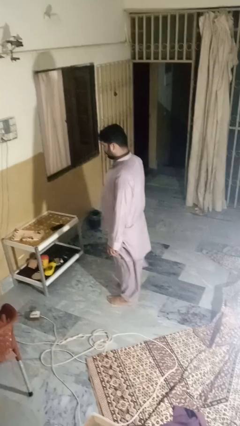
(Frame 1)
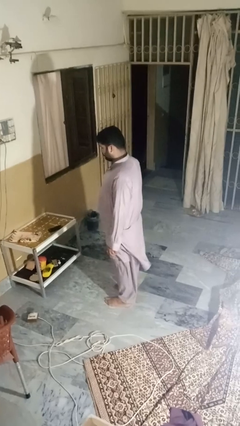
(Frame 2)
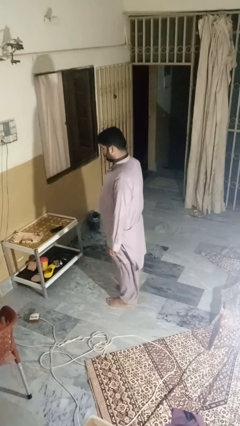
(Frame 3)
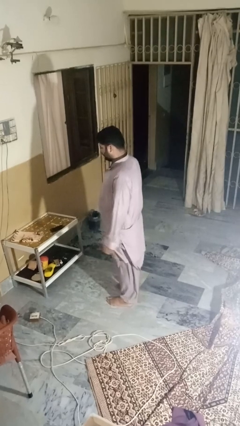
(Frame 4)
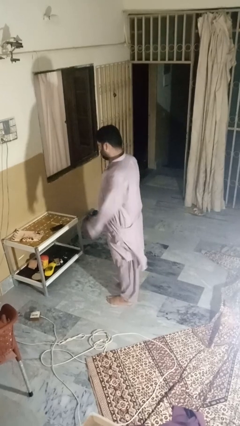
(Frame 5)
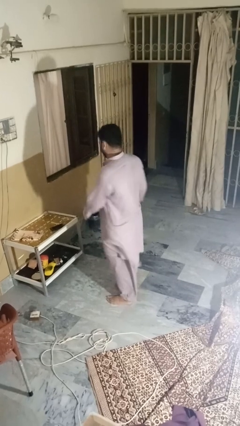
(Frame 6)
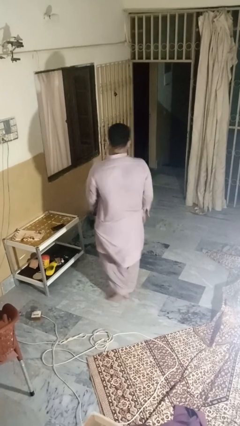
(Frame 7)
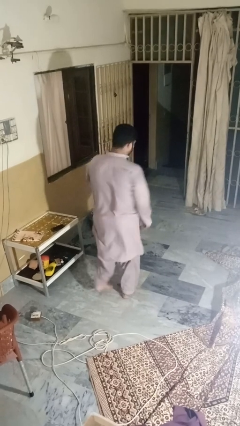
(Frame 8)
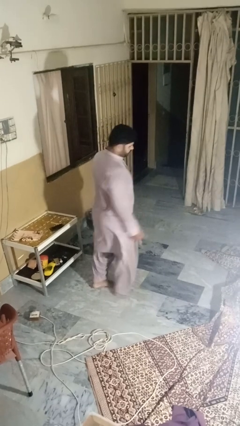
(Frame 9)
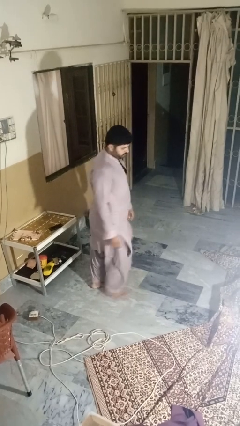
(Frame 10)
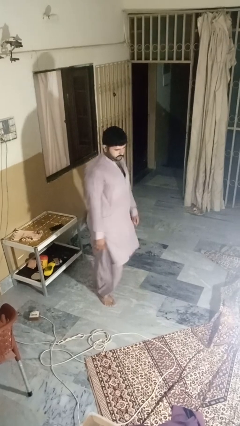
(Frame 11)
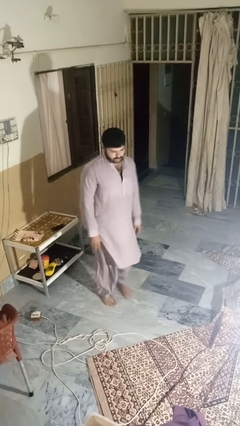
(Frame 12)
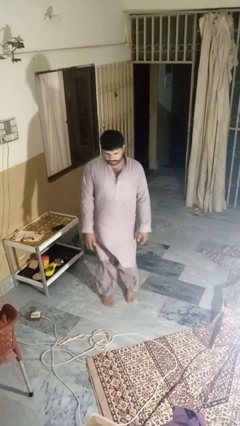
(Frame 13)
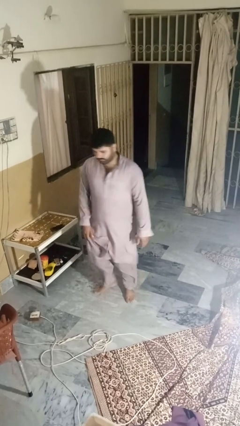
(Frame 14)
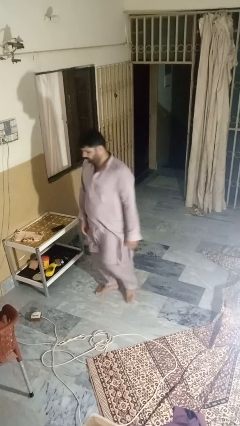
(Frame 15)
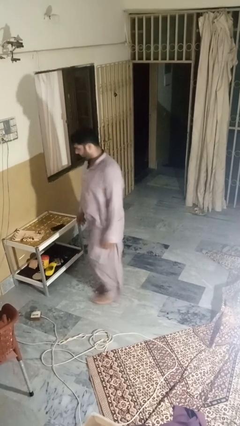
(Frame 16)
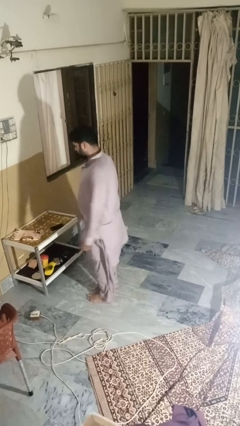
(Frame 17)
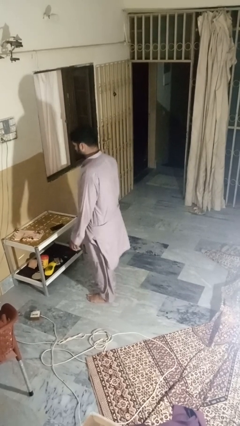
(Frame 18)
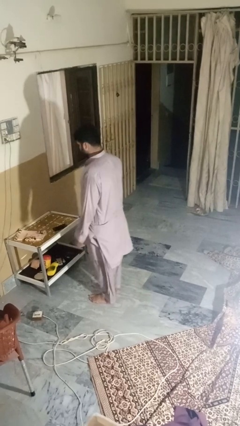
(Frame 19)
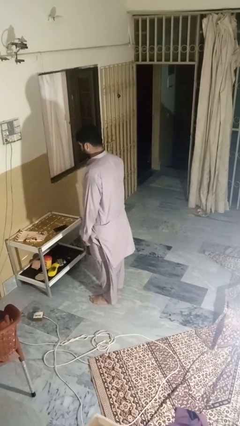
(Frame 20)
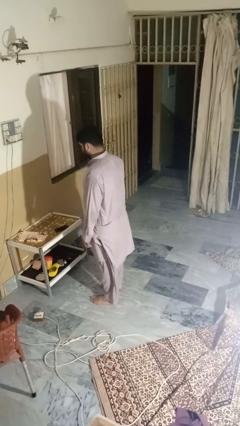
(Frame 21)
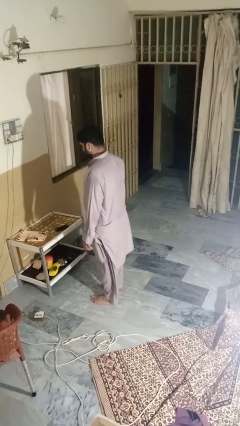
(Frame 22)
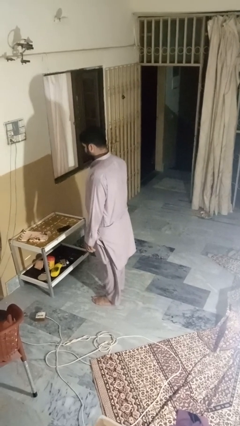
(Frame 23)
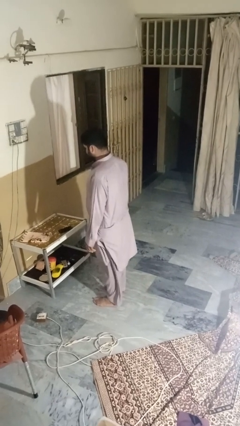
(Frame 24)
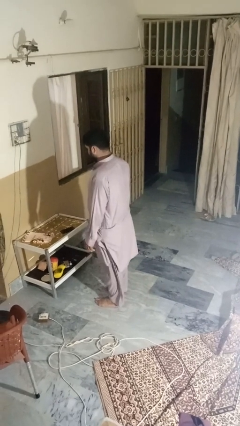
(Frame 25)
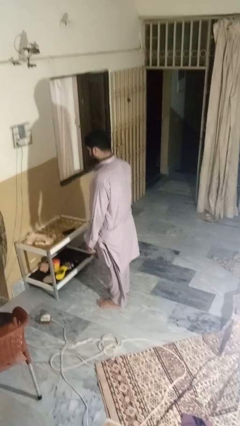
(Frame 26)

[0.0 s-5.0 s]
person twirls

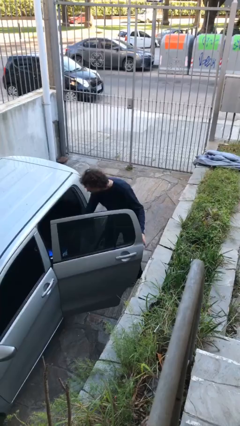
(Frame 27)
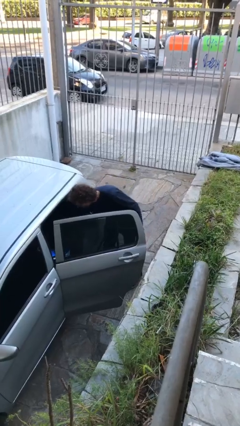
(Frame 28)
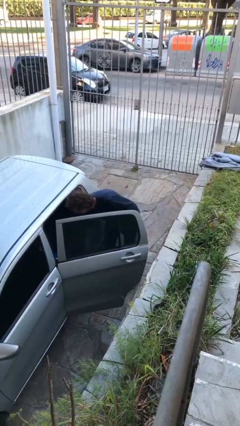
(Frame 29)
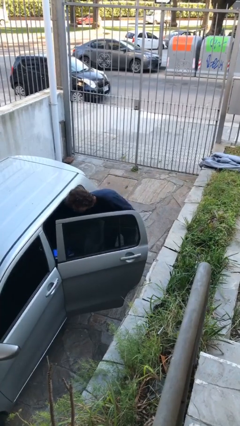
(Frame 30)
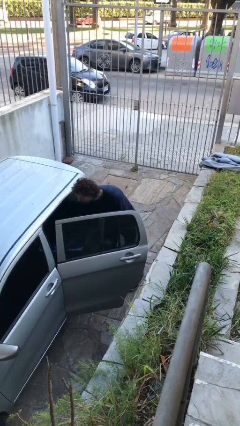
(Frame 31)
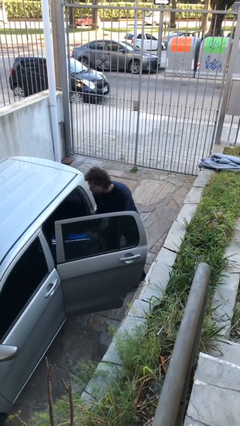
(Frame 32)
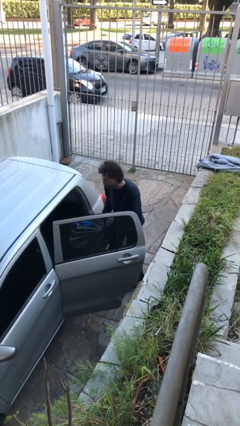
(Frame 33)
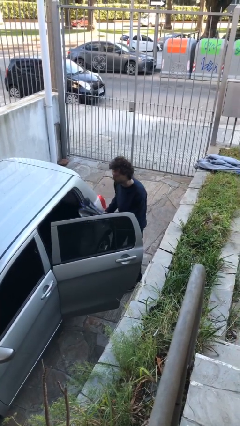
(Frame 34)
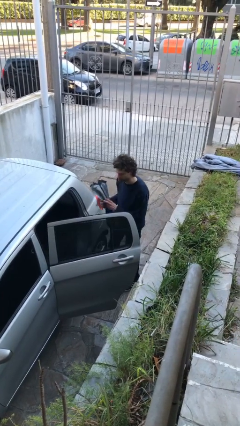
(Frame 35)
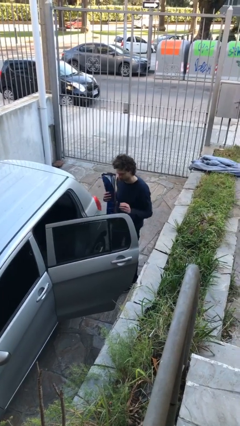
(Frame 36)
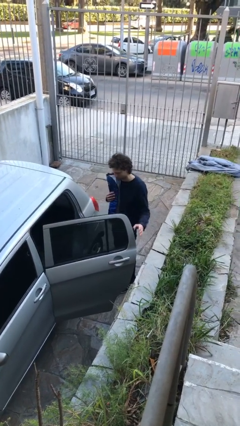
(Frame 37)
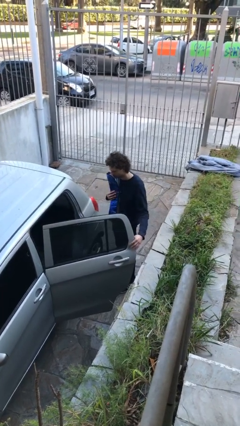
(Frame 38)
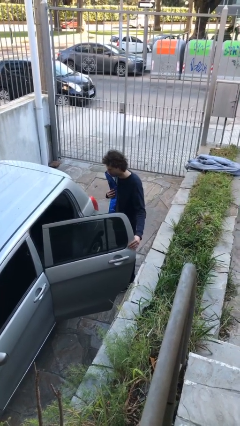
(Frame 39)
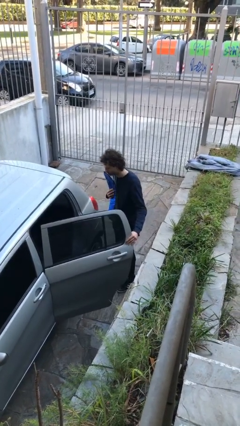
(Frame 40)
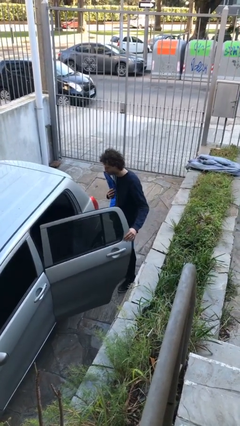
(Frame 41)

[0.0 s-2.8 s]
person unloads car

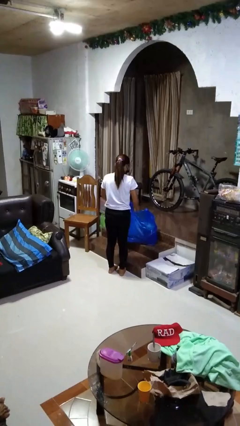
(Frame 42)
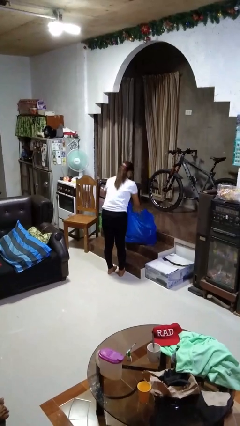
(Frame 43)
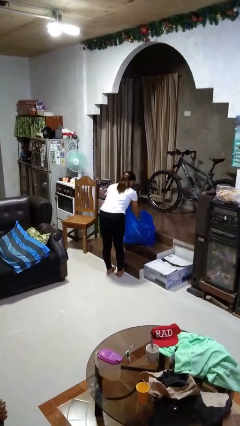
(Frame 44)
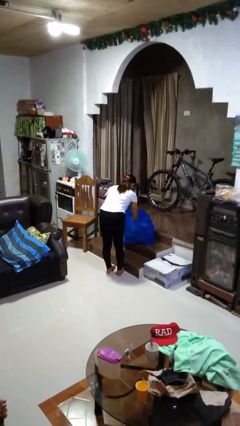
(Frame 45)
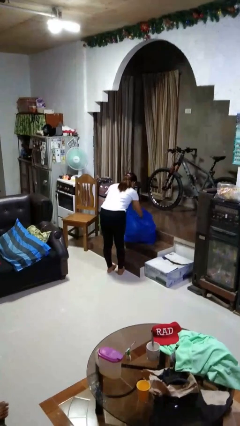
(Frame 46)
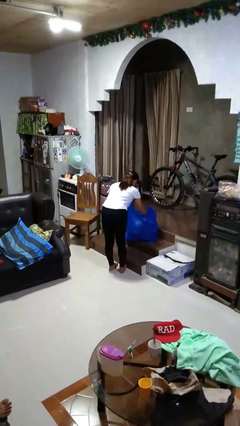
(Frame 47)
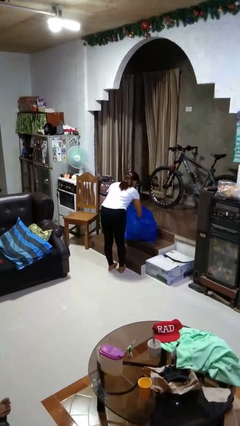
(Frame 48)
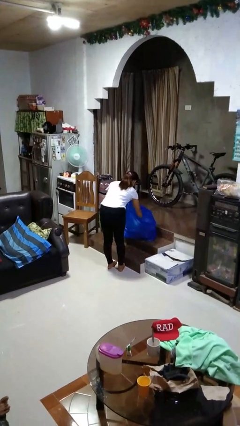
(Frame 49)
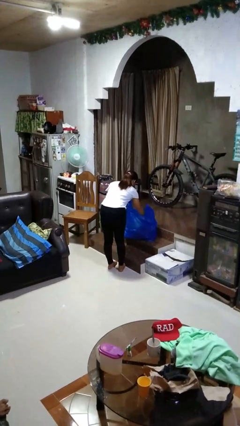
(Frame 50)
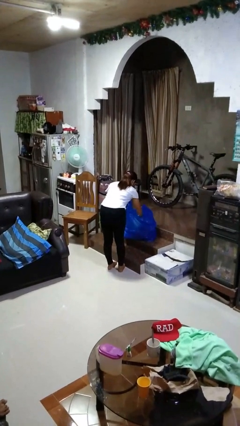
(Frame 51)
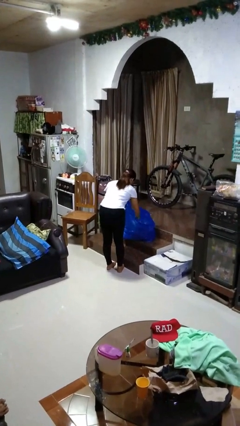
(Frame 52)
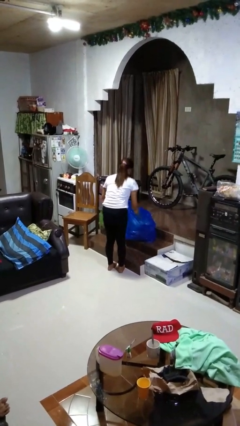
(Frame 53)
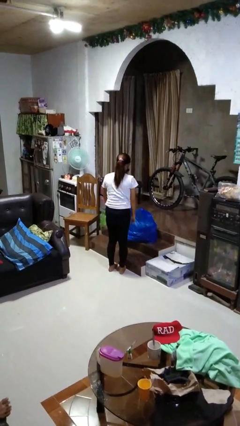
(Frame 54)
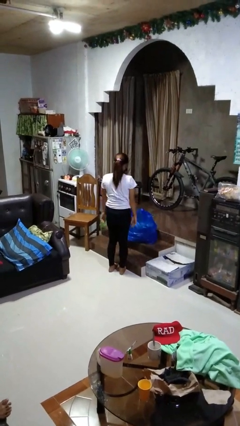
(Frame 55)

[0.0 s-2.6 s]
person searches in bag

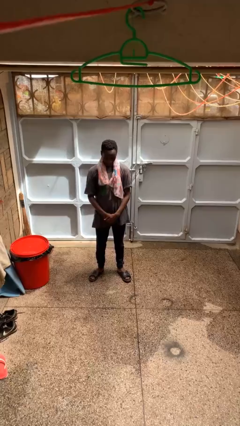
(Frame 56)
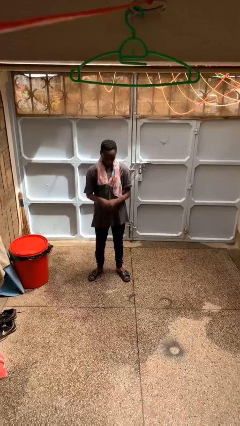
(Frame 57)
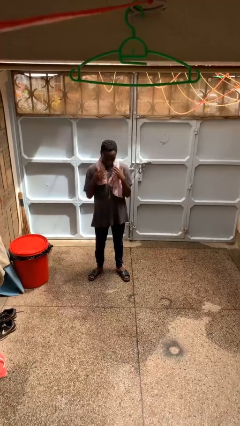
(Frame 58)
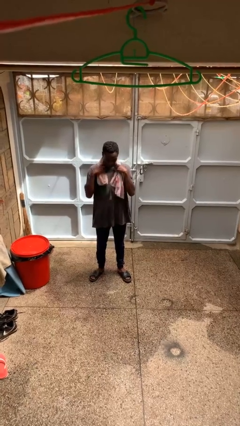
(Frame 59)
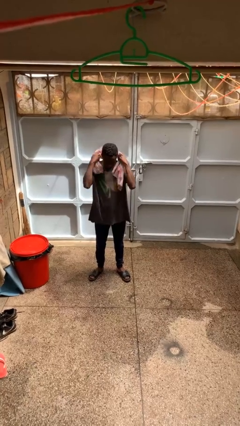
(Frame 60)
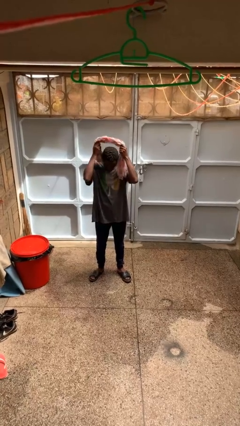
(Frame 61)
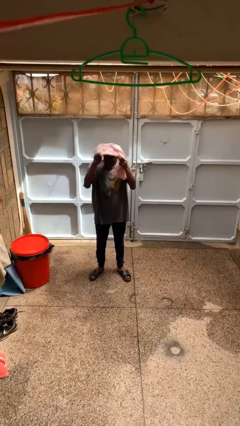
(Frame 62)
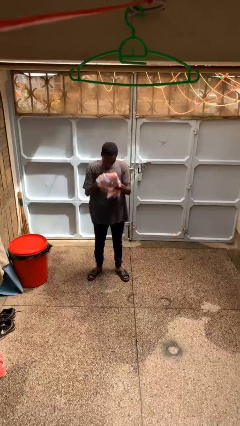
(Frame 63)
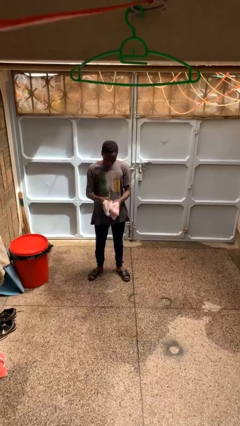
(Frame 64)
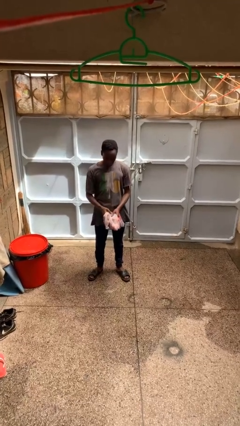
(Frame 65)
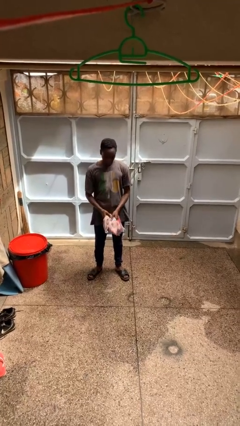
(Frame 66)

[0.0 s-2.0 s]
person takes off scarf

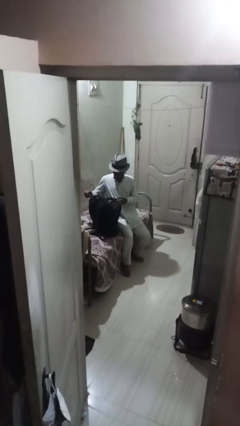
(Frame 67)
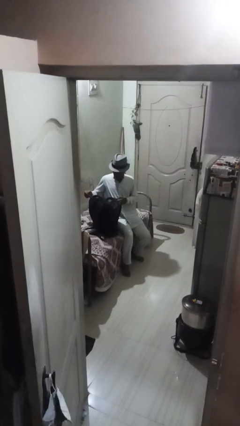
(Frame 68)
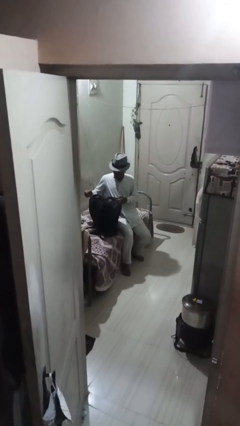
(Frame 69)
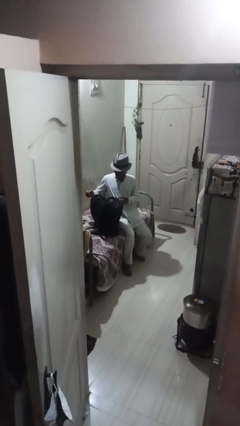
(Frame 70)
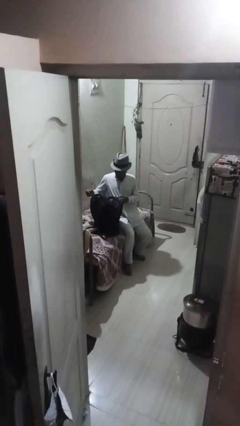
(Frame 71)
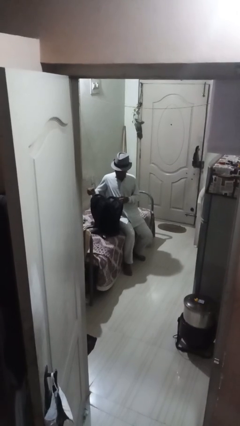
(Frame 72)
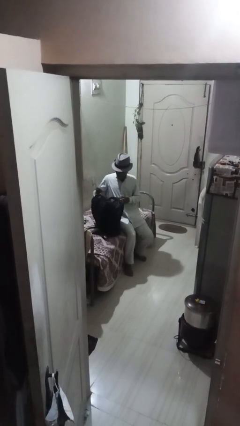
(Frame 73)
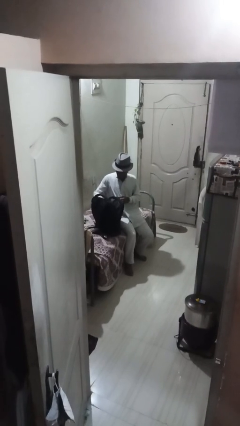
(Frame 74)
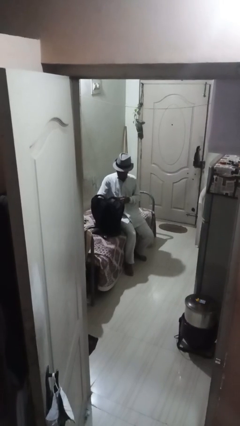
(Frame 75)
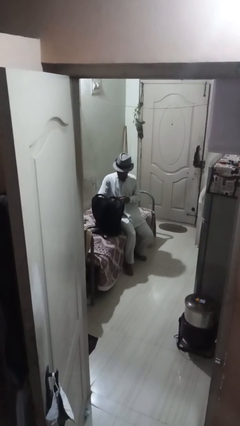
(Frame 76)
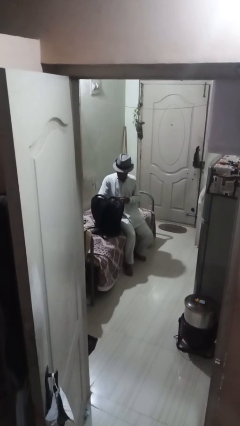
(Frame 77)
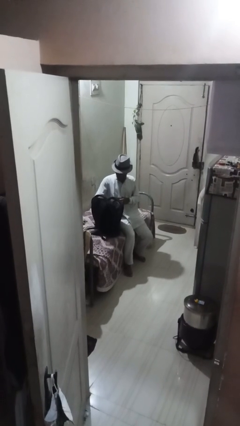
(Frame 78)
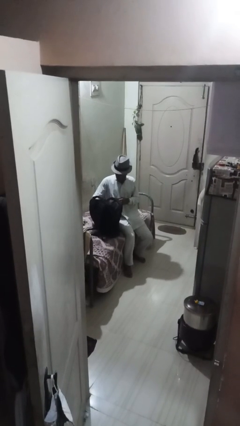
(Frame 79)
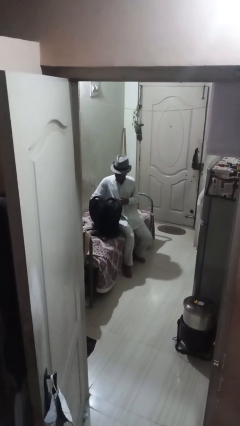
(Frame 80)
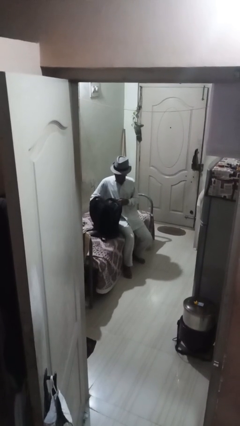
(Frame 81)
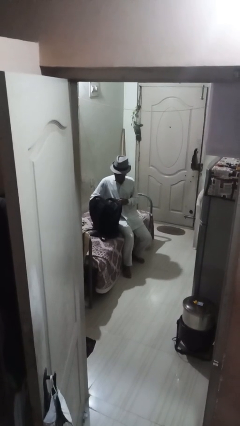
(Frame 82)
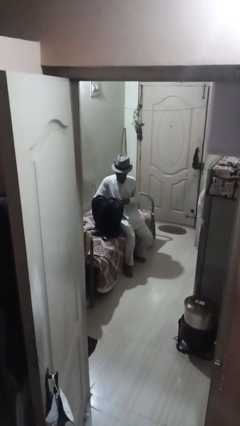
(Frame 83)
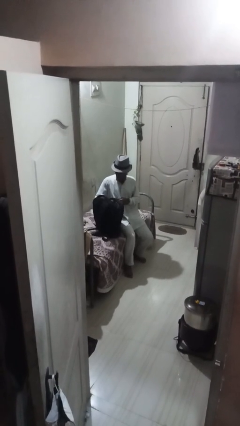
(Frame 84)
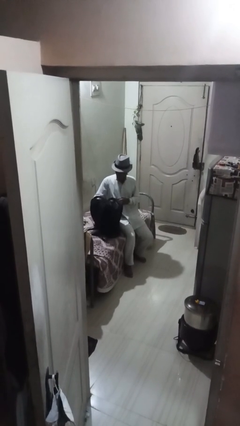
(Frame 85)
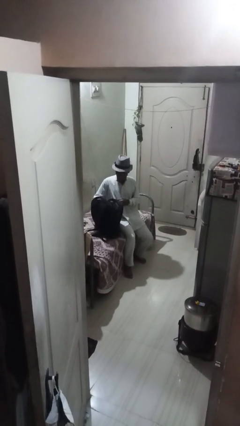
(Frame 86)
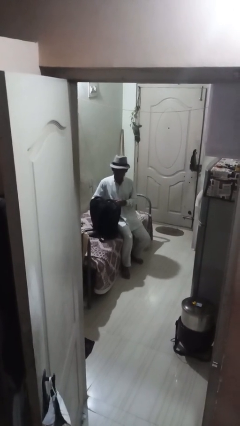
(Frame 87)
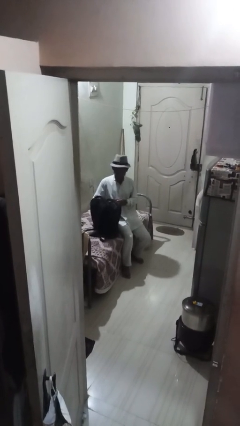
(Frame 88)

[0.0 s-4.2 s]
person searches in backpack

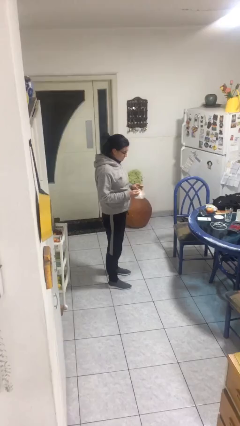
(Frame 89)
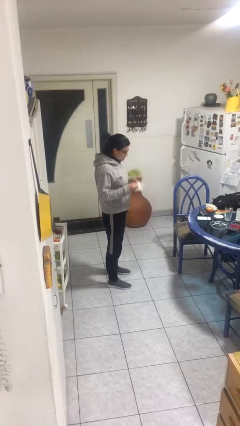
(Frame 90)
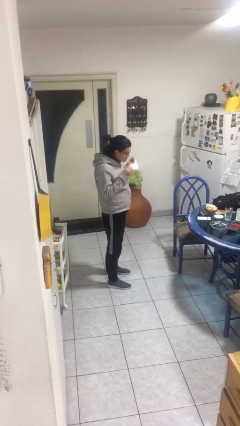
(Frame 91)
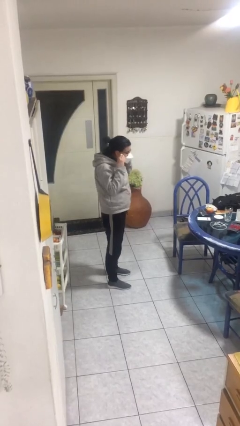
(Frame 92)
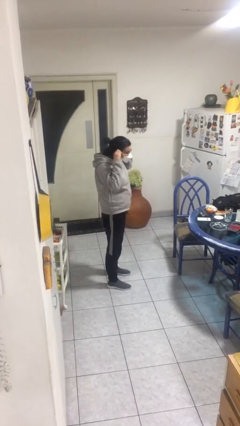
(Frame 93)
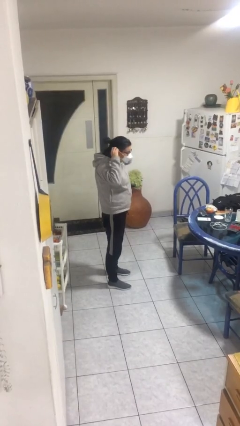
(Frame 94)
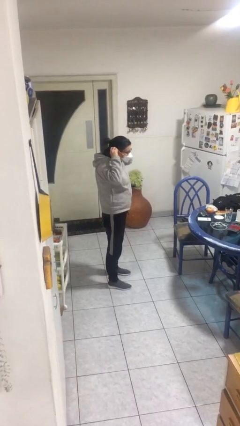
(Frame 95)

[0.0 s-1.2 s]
person puts on facemask
